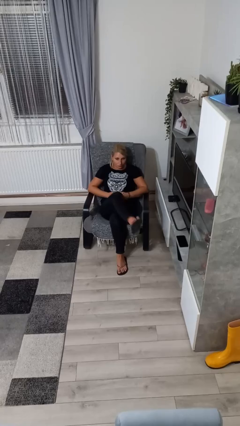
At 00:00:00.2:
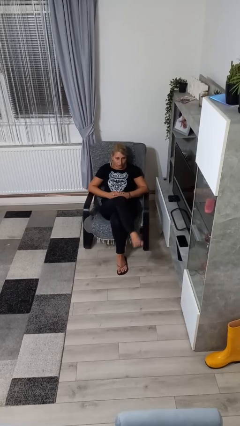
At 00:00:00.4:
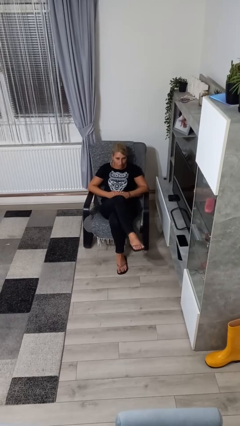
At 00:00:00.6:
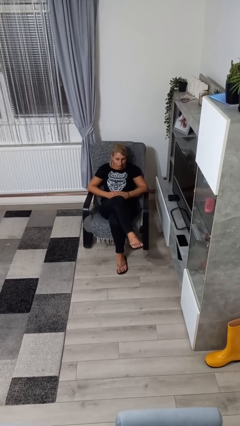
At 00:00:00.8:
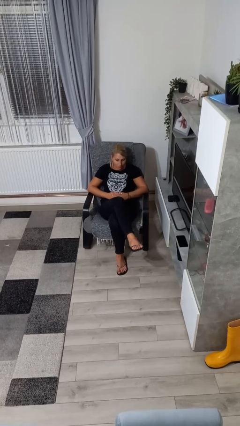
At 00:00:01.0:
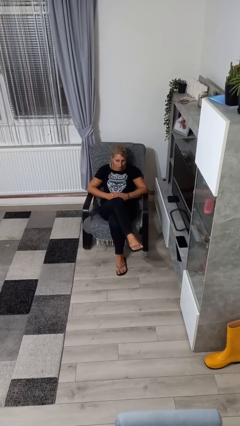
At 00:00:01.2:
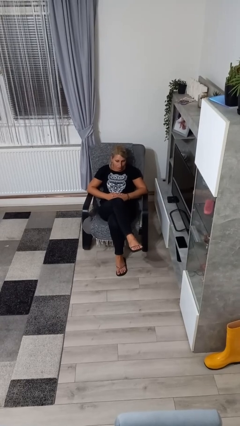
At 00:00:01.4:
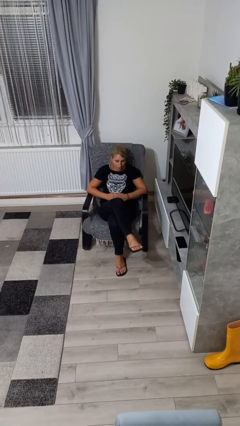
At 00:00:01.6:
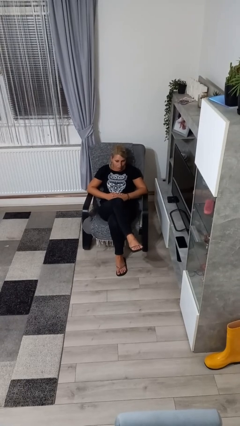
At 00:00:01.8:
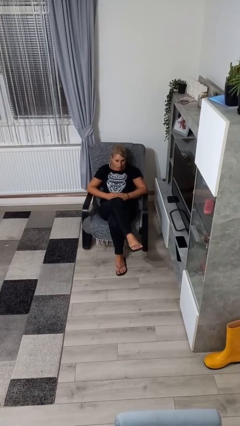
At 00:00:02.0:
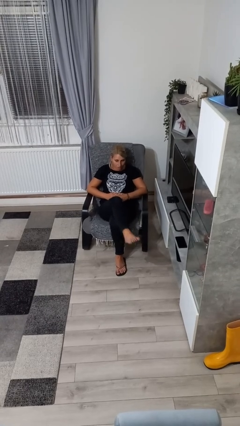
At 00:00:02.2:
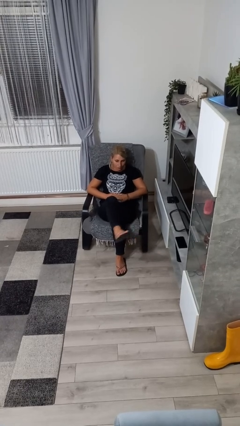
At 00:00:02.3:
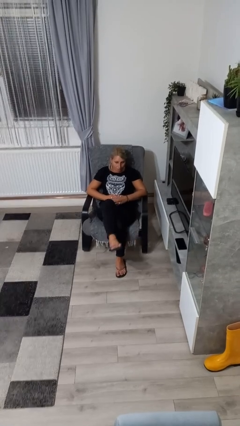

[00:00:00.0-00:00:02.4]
person crosses legs

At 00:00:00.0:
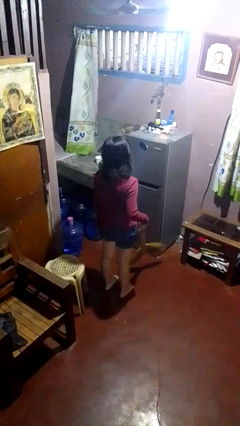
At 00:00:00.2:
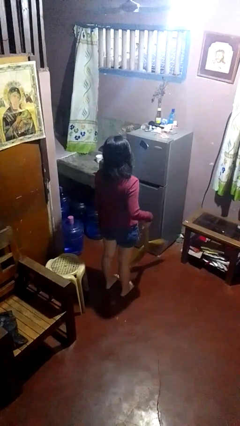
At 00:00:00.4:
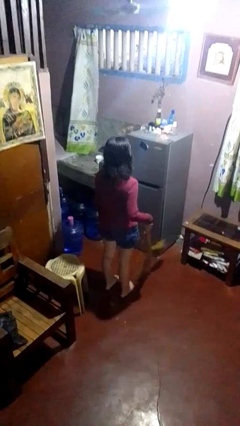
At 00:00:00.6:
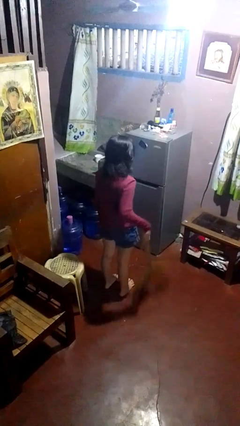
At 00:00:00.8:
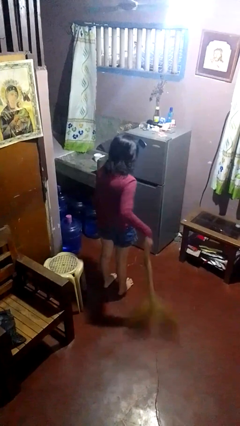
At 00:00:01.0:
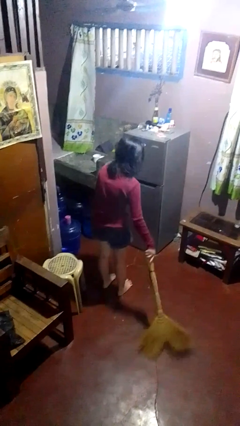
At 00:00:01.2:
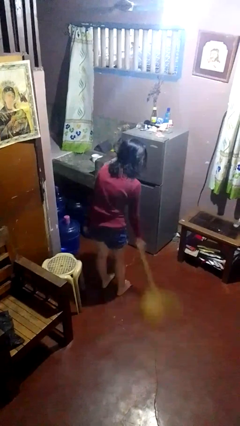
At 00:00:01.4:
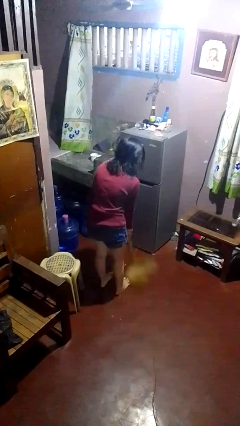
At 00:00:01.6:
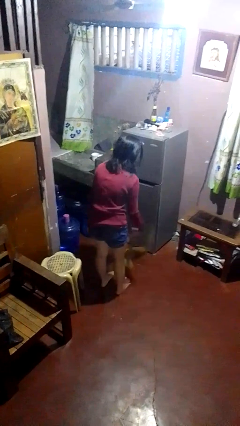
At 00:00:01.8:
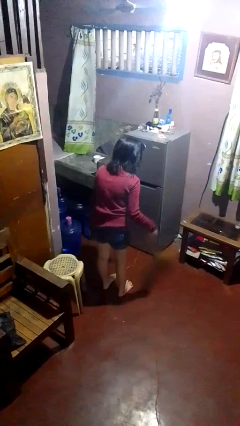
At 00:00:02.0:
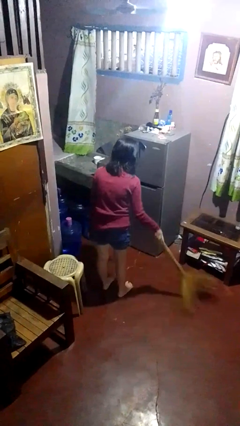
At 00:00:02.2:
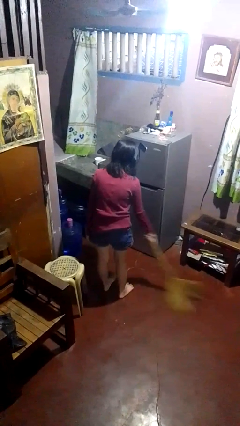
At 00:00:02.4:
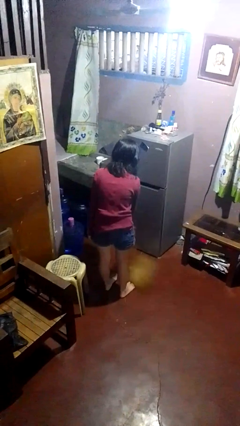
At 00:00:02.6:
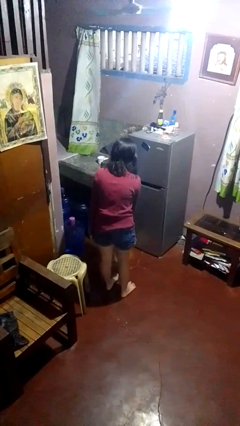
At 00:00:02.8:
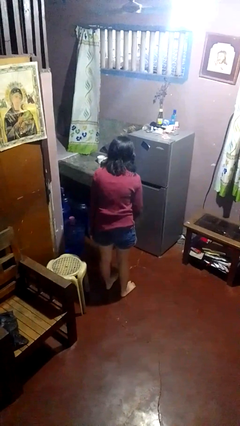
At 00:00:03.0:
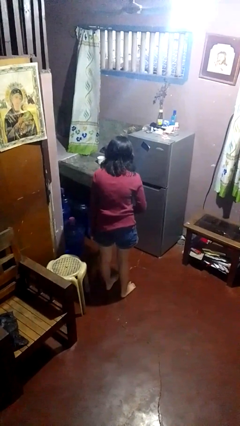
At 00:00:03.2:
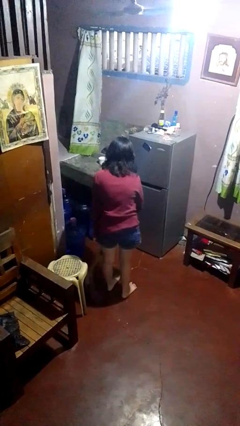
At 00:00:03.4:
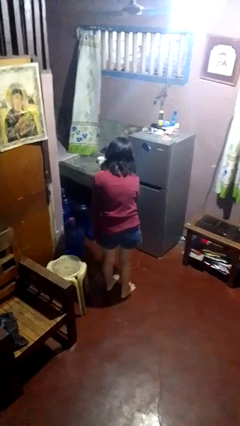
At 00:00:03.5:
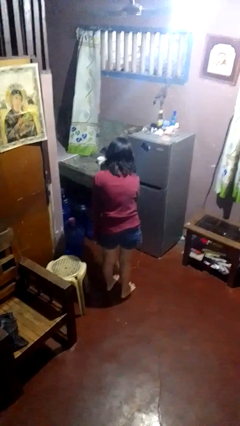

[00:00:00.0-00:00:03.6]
person sweeps floor

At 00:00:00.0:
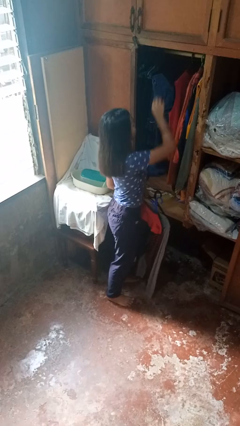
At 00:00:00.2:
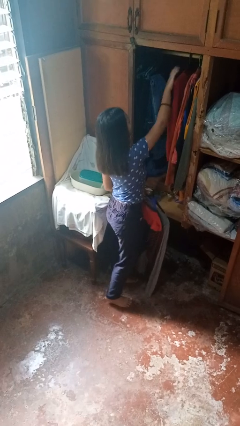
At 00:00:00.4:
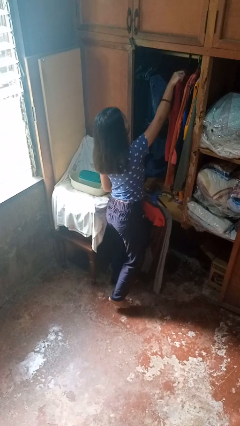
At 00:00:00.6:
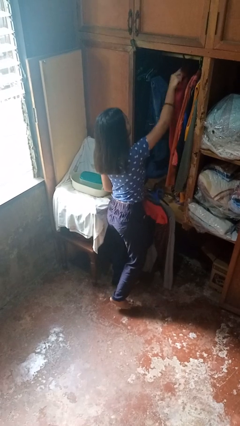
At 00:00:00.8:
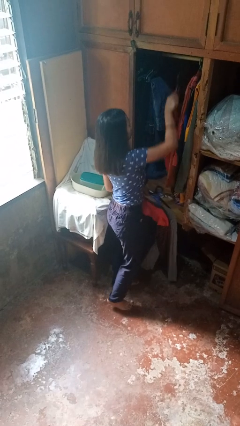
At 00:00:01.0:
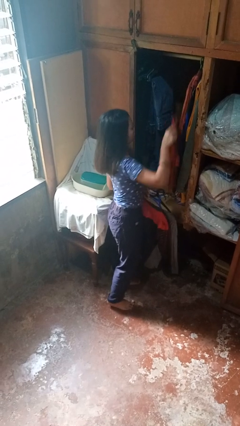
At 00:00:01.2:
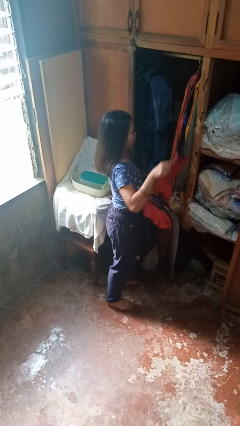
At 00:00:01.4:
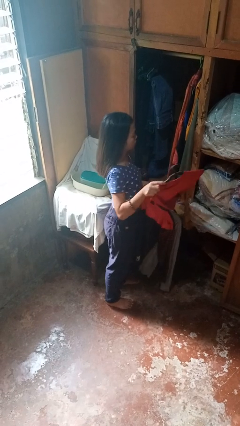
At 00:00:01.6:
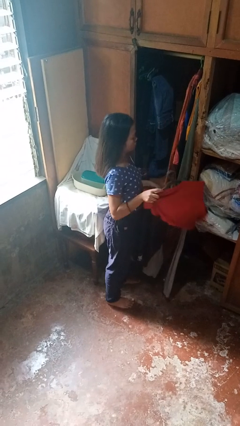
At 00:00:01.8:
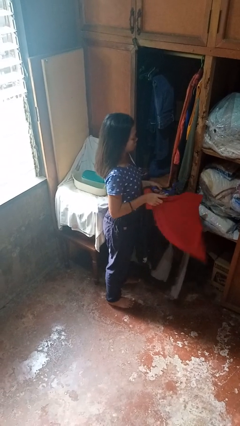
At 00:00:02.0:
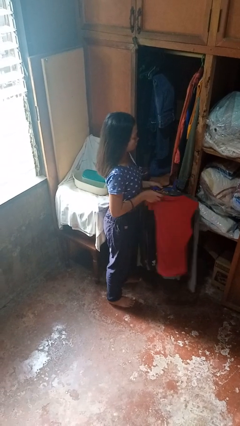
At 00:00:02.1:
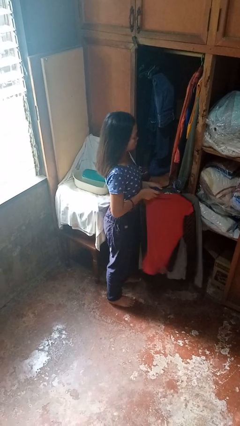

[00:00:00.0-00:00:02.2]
person takes clothes from closet

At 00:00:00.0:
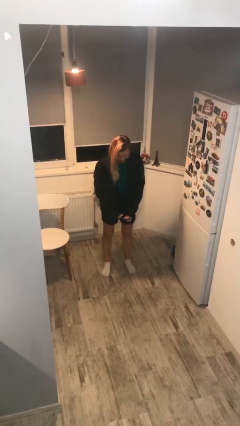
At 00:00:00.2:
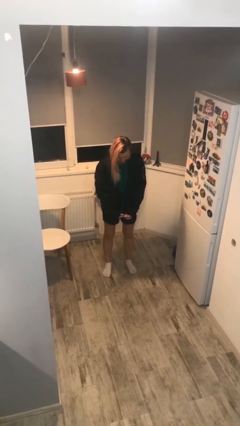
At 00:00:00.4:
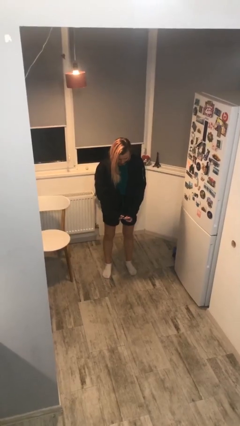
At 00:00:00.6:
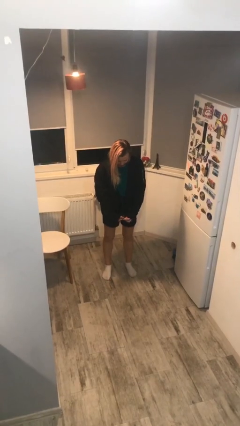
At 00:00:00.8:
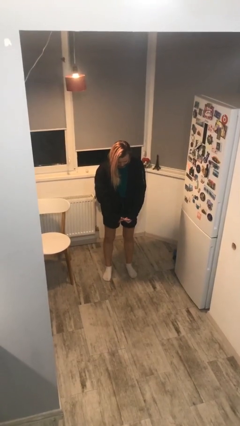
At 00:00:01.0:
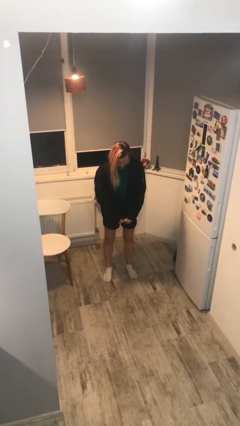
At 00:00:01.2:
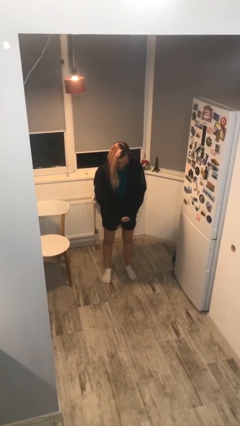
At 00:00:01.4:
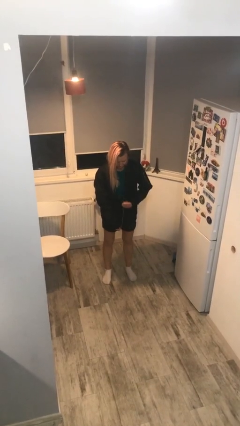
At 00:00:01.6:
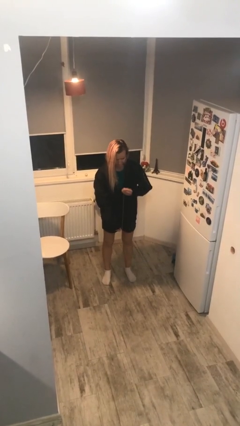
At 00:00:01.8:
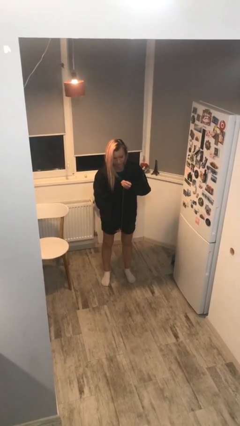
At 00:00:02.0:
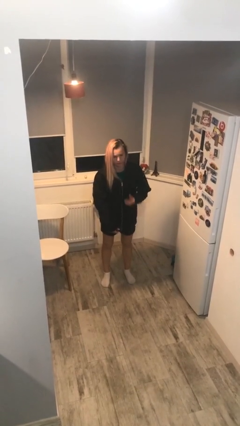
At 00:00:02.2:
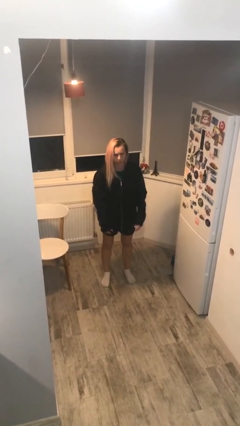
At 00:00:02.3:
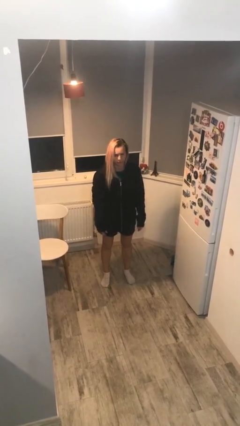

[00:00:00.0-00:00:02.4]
person zips up jacket

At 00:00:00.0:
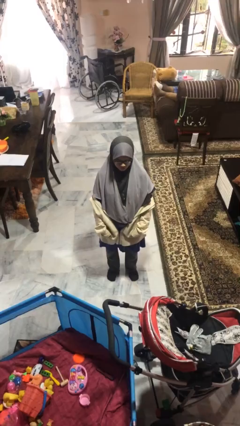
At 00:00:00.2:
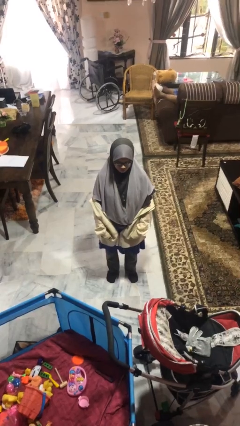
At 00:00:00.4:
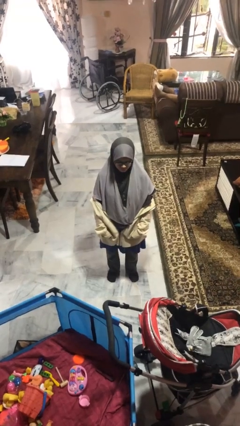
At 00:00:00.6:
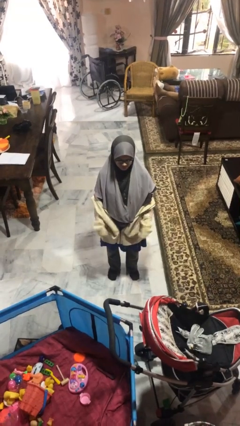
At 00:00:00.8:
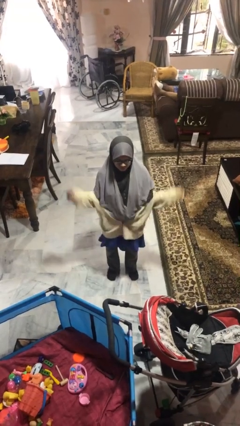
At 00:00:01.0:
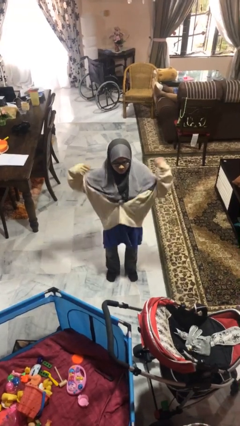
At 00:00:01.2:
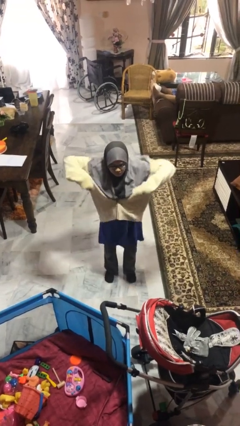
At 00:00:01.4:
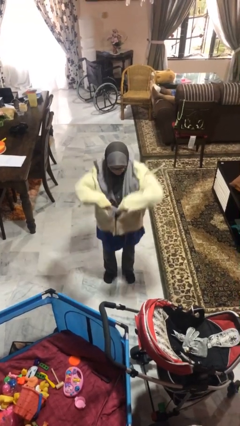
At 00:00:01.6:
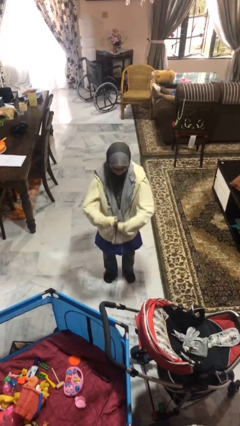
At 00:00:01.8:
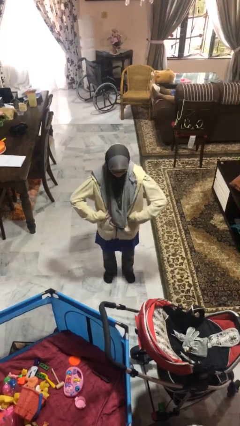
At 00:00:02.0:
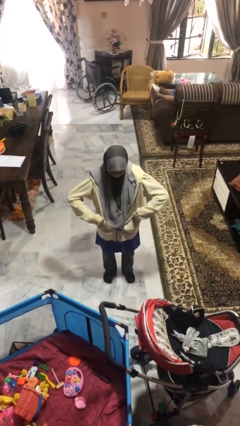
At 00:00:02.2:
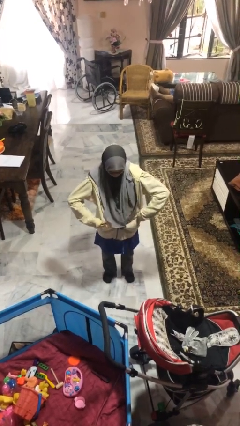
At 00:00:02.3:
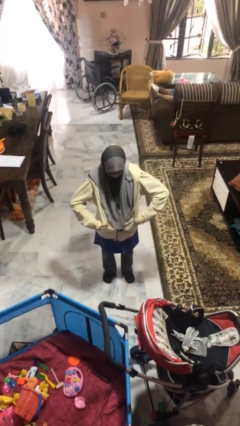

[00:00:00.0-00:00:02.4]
person puts on jacket

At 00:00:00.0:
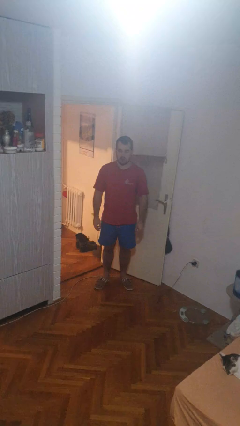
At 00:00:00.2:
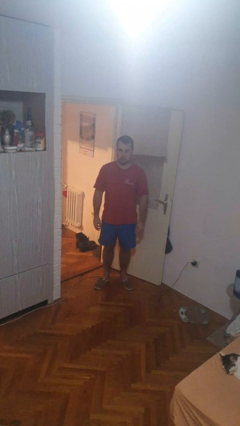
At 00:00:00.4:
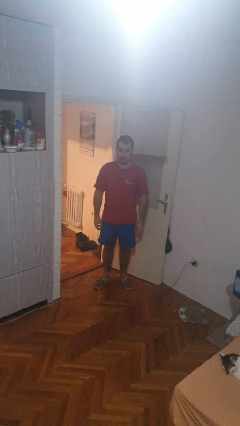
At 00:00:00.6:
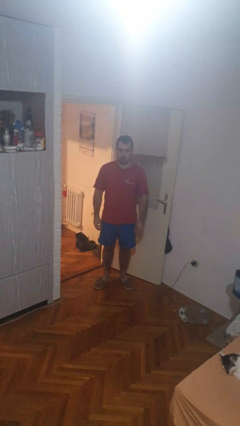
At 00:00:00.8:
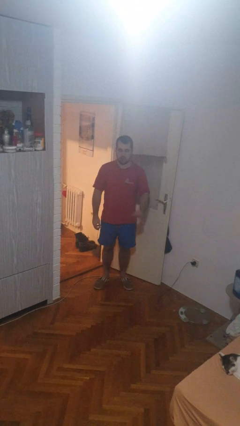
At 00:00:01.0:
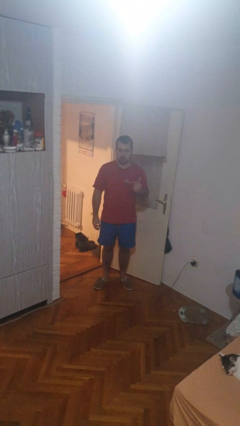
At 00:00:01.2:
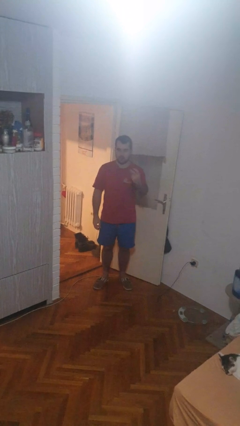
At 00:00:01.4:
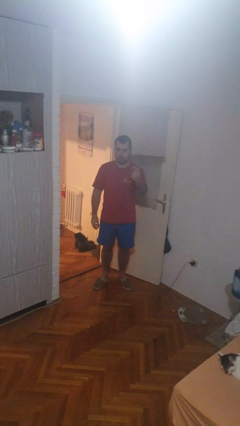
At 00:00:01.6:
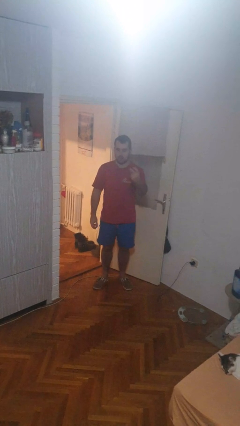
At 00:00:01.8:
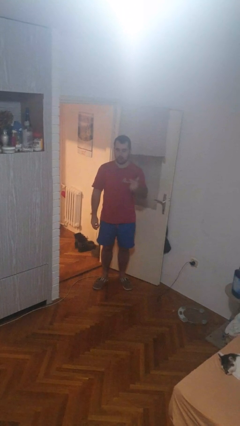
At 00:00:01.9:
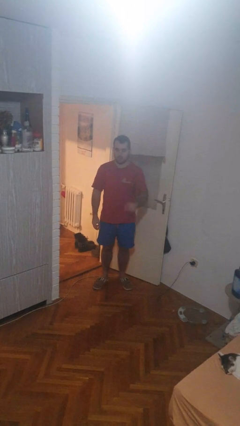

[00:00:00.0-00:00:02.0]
person snaps fingers

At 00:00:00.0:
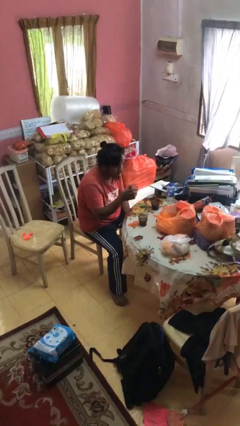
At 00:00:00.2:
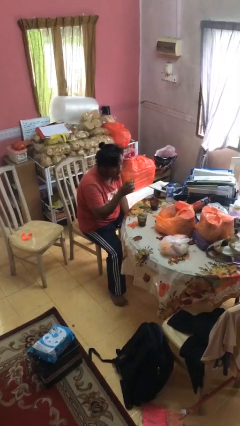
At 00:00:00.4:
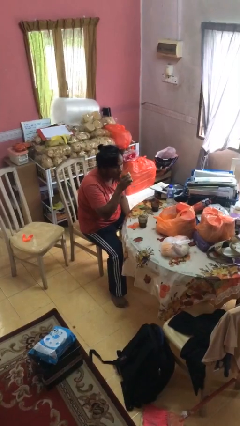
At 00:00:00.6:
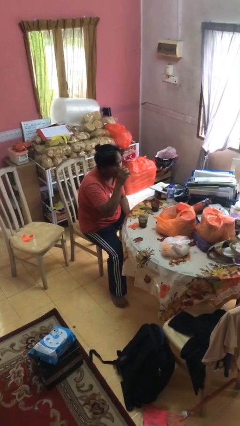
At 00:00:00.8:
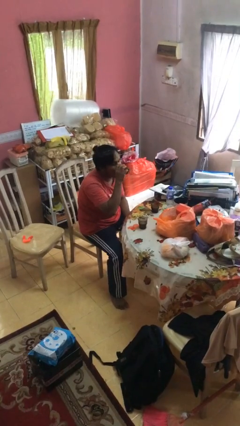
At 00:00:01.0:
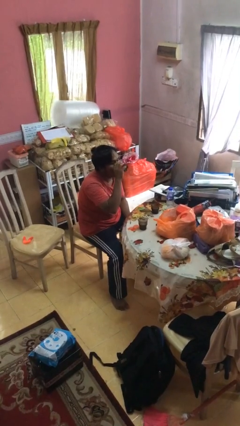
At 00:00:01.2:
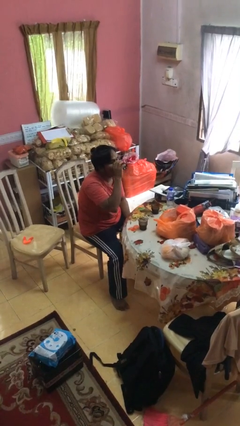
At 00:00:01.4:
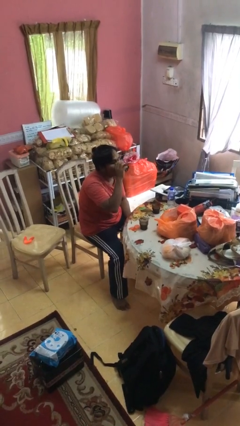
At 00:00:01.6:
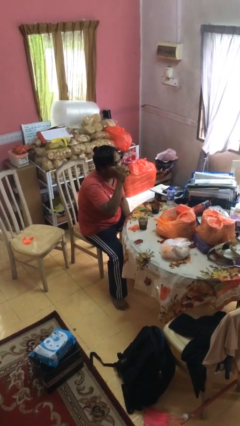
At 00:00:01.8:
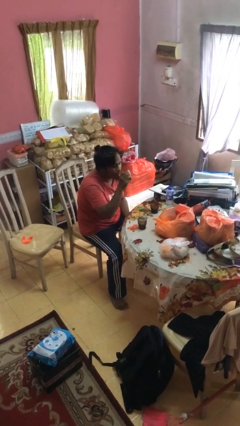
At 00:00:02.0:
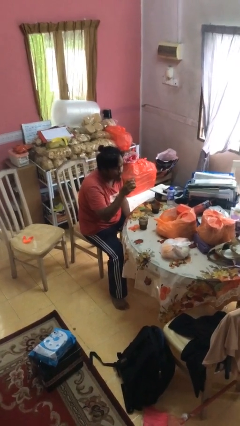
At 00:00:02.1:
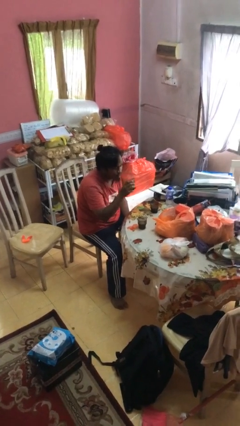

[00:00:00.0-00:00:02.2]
person drinks from shotglass
